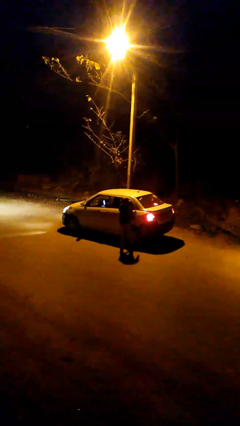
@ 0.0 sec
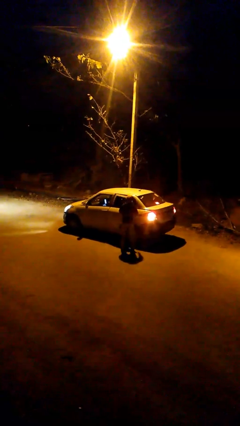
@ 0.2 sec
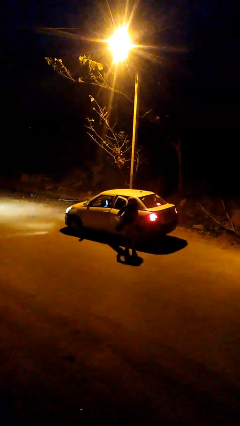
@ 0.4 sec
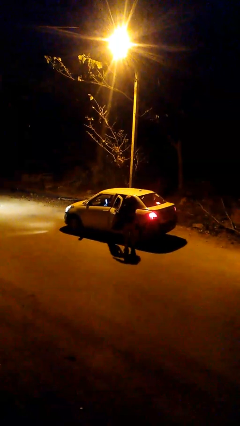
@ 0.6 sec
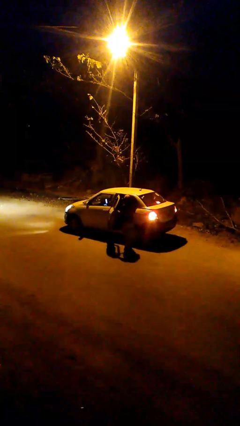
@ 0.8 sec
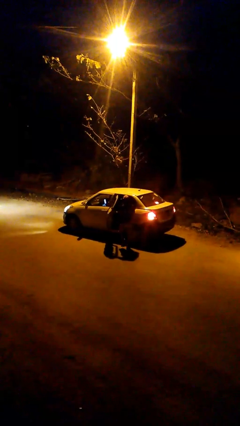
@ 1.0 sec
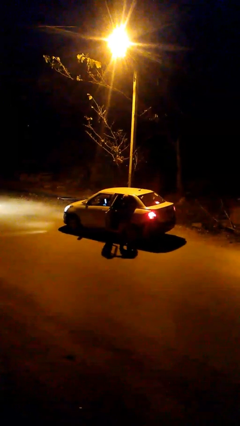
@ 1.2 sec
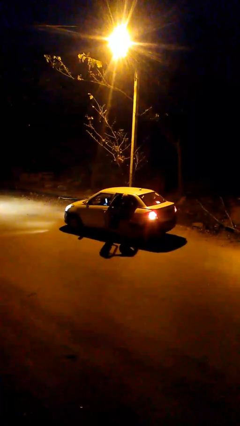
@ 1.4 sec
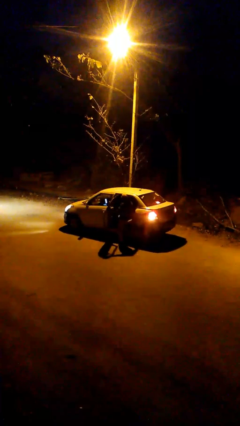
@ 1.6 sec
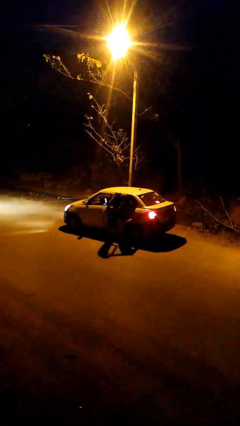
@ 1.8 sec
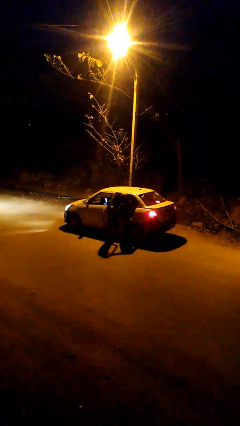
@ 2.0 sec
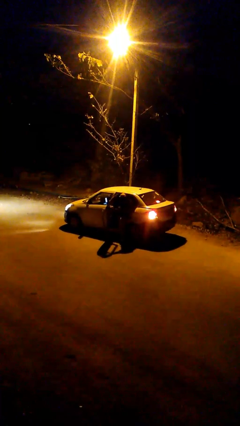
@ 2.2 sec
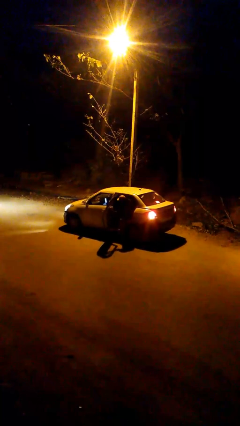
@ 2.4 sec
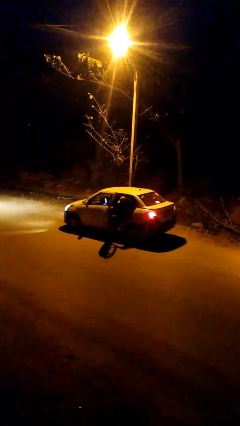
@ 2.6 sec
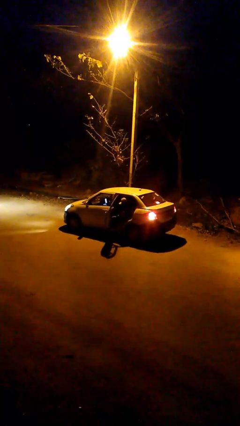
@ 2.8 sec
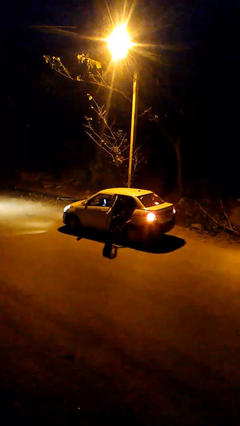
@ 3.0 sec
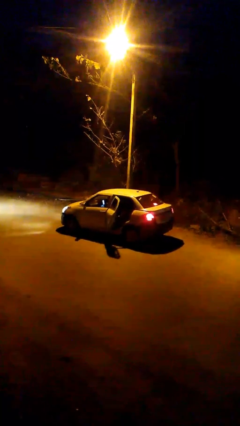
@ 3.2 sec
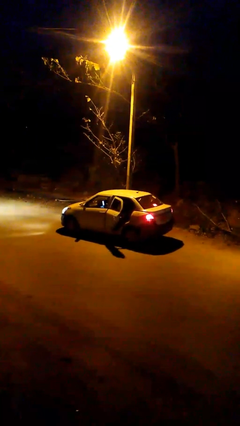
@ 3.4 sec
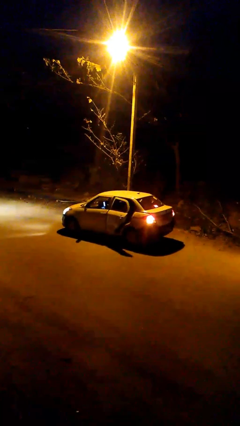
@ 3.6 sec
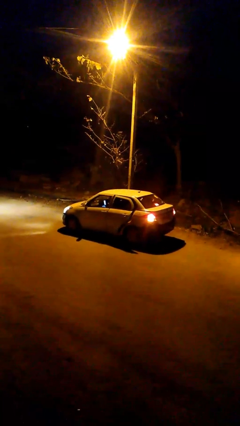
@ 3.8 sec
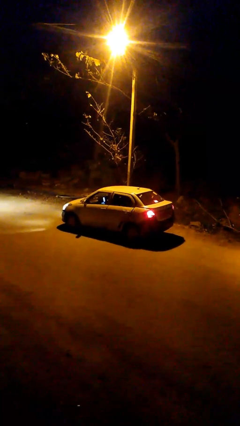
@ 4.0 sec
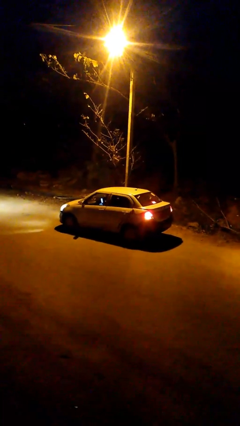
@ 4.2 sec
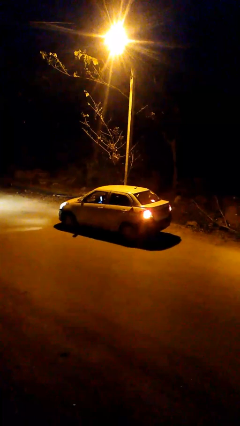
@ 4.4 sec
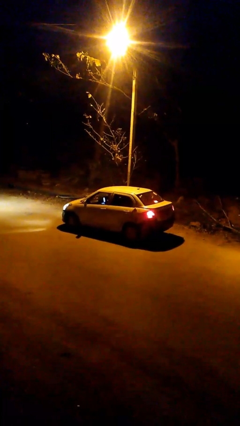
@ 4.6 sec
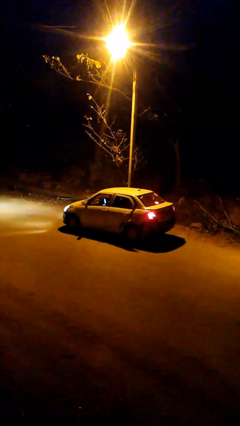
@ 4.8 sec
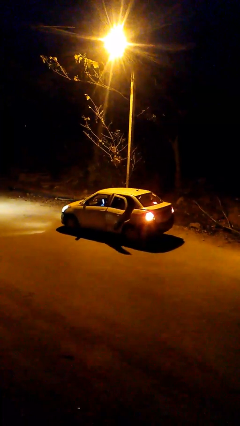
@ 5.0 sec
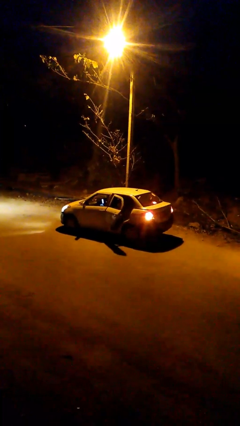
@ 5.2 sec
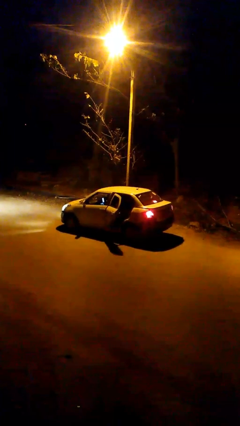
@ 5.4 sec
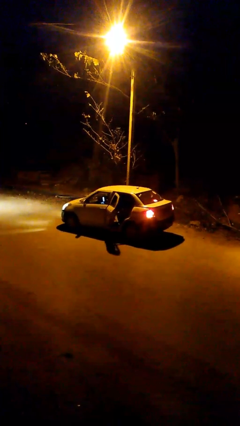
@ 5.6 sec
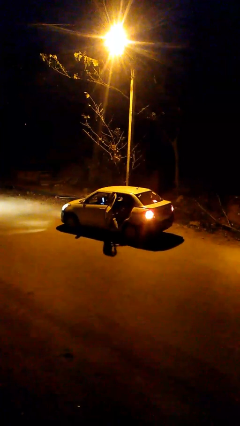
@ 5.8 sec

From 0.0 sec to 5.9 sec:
car picks up person

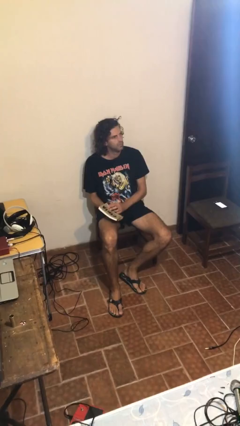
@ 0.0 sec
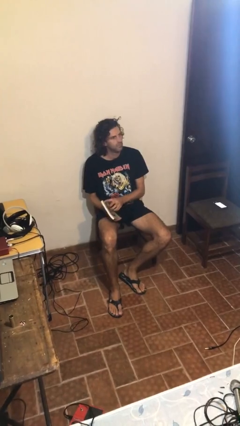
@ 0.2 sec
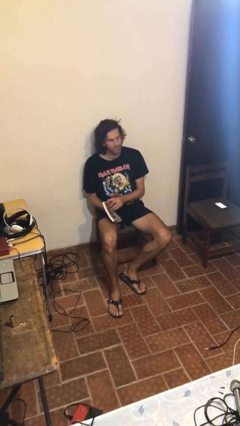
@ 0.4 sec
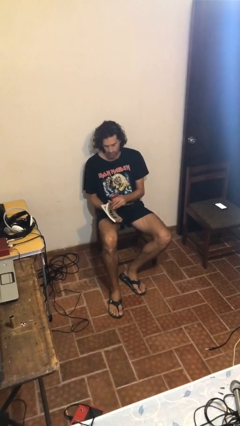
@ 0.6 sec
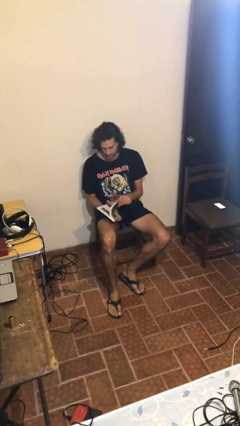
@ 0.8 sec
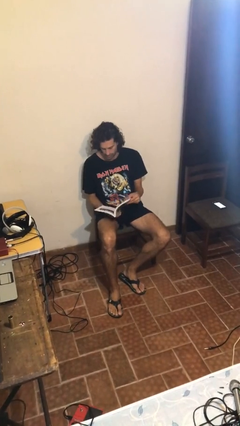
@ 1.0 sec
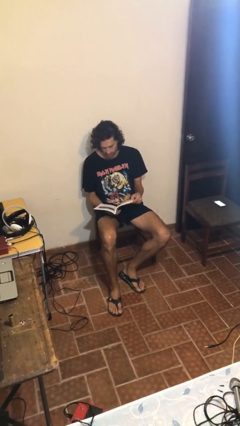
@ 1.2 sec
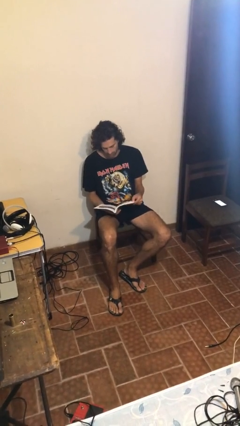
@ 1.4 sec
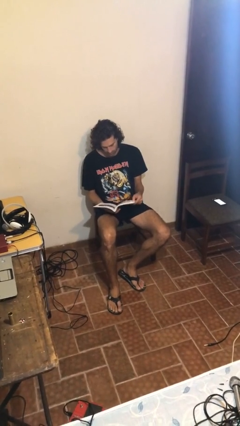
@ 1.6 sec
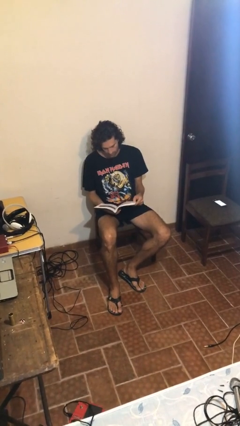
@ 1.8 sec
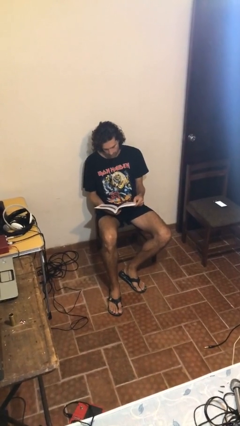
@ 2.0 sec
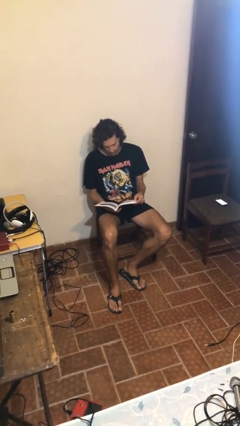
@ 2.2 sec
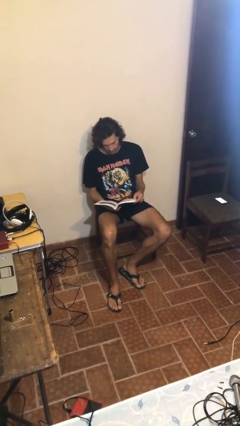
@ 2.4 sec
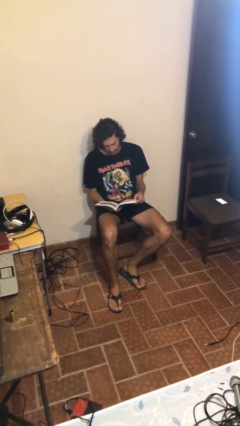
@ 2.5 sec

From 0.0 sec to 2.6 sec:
person reads document

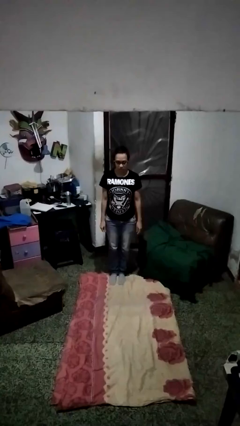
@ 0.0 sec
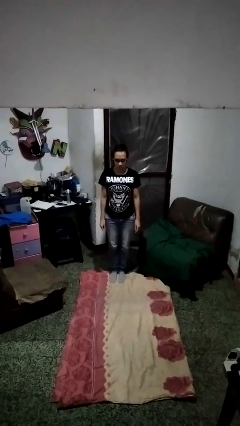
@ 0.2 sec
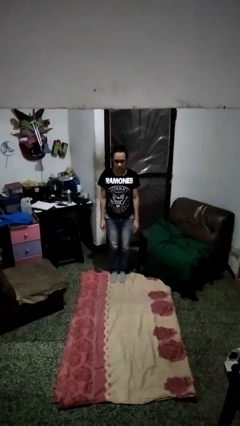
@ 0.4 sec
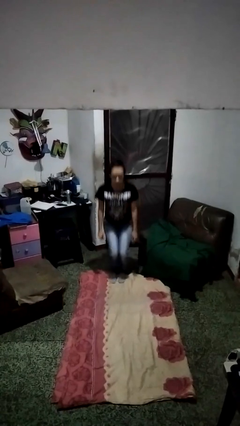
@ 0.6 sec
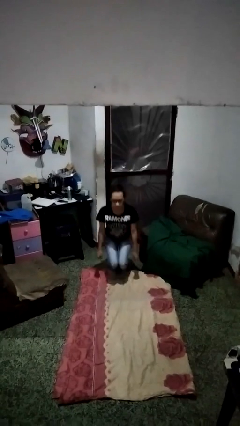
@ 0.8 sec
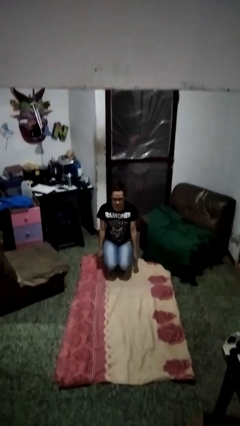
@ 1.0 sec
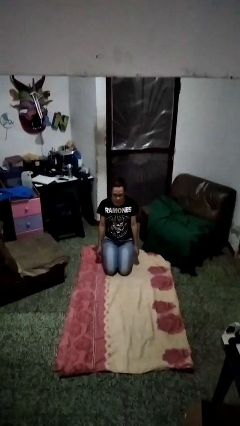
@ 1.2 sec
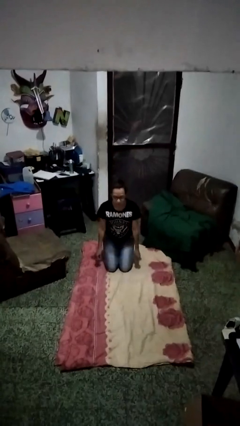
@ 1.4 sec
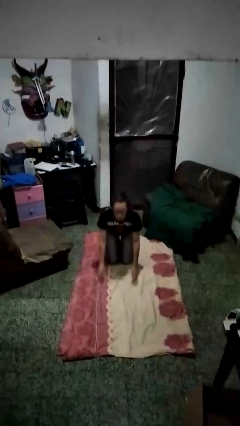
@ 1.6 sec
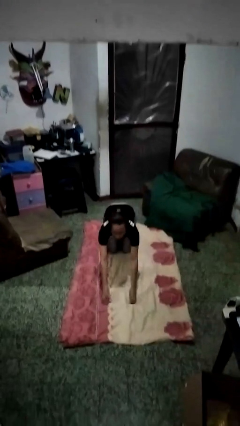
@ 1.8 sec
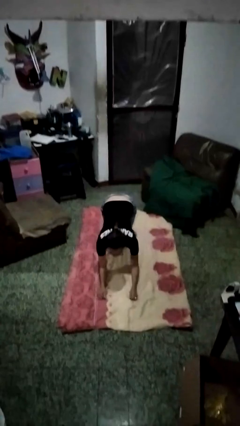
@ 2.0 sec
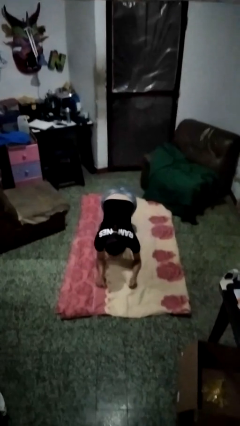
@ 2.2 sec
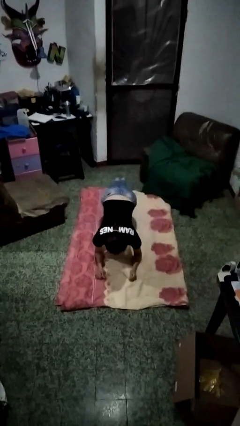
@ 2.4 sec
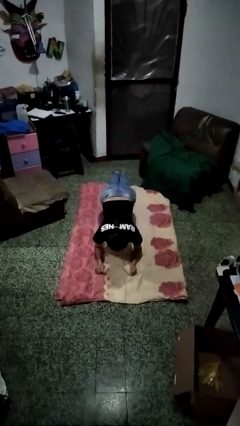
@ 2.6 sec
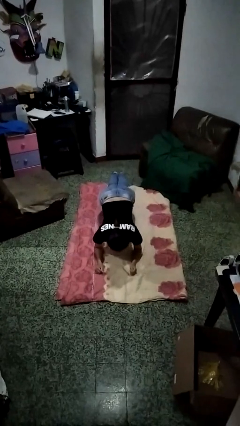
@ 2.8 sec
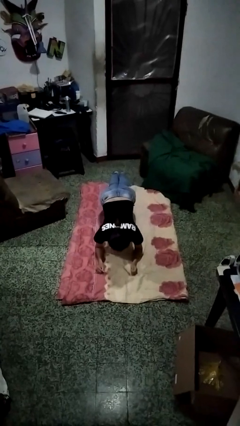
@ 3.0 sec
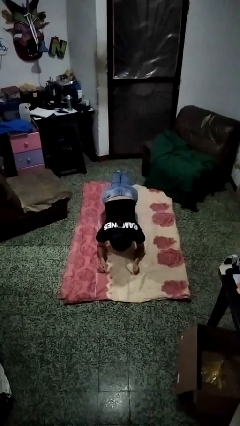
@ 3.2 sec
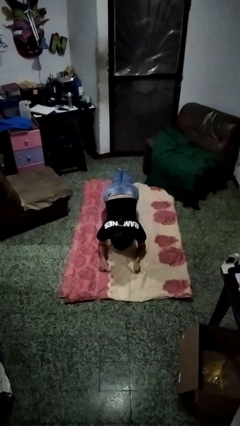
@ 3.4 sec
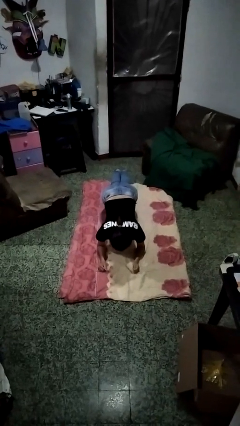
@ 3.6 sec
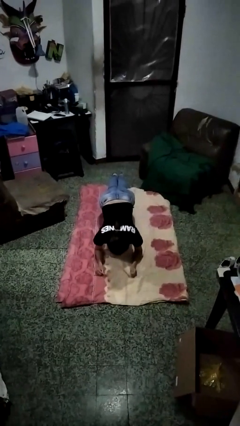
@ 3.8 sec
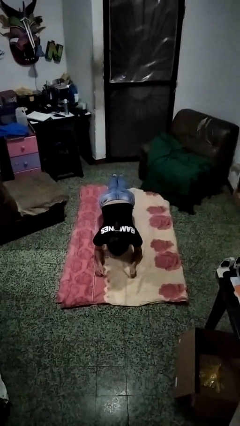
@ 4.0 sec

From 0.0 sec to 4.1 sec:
person exercises with plank

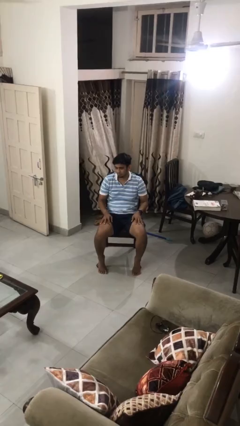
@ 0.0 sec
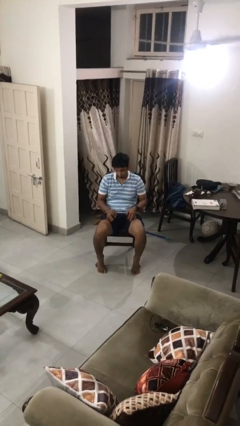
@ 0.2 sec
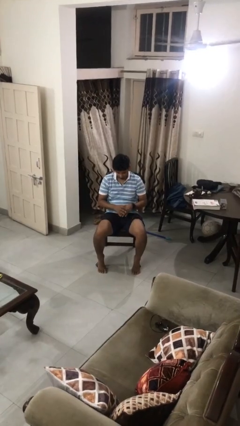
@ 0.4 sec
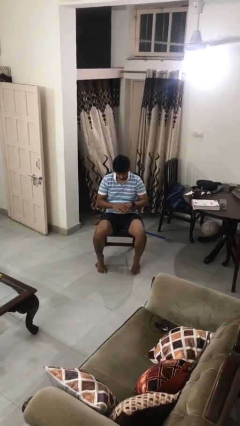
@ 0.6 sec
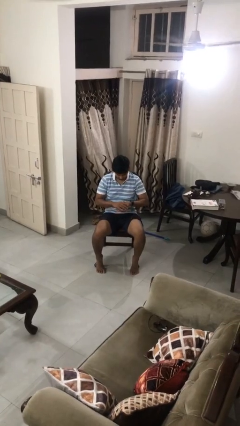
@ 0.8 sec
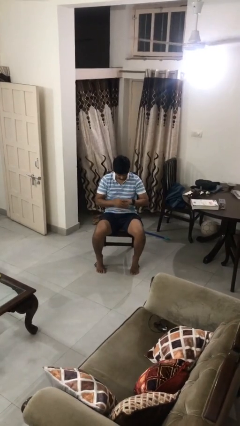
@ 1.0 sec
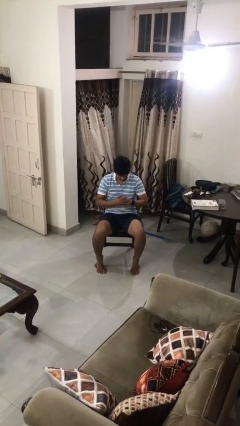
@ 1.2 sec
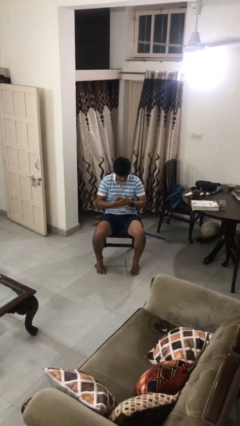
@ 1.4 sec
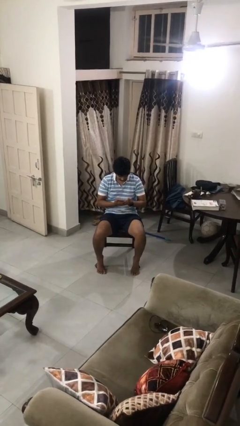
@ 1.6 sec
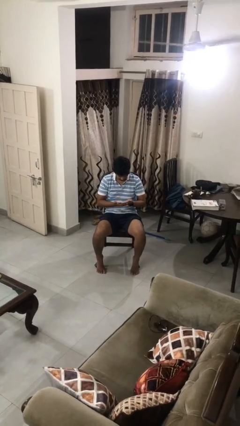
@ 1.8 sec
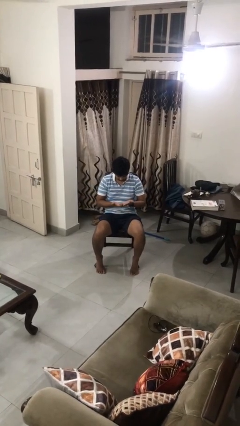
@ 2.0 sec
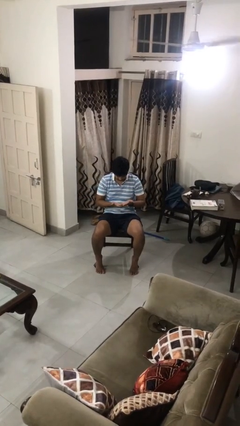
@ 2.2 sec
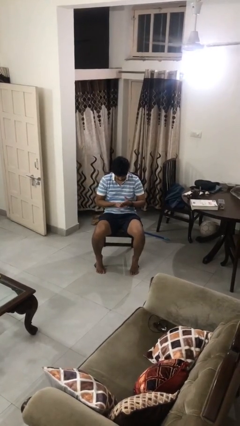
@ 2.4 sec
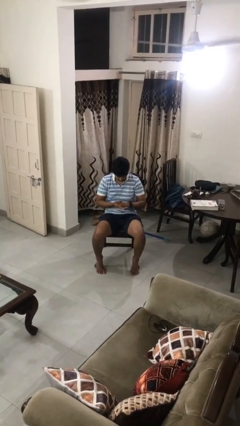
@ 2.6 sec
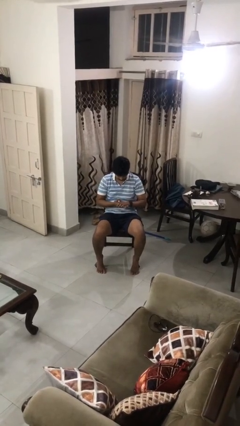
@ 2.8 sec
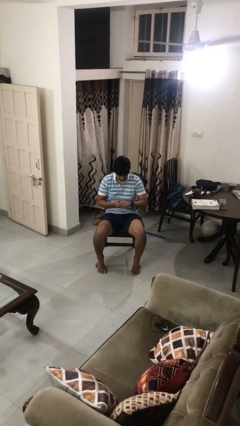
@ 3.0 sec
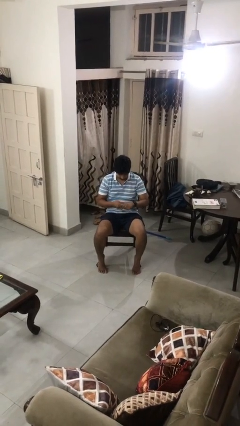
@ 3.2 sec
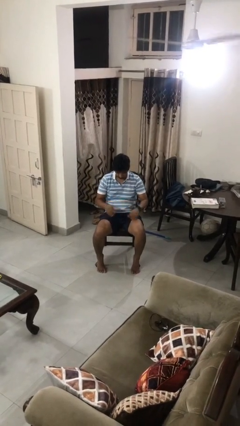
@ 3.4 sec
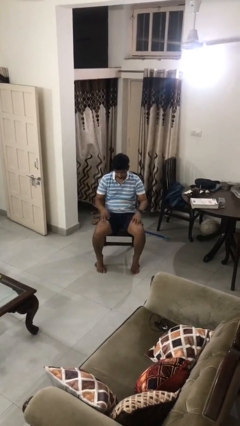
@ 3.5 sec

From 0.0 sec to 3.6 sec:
person looks at hands in lap

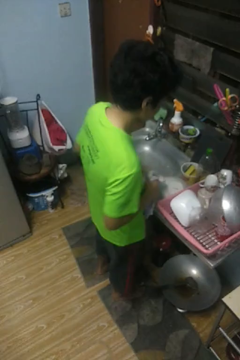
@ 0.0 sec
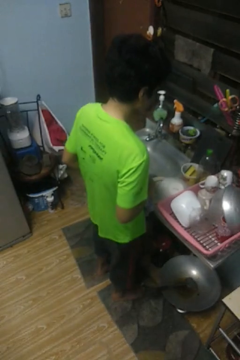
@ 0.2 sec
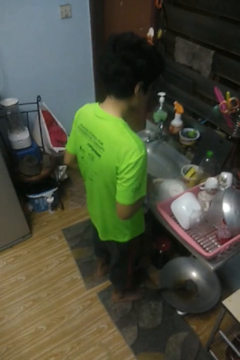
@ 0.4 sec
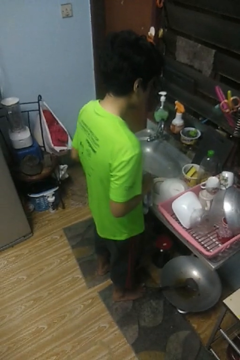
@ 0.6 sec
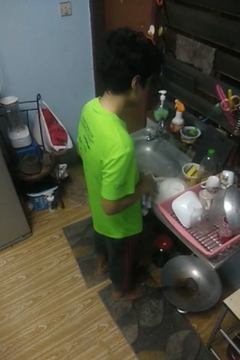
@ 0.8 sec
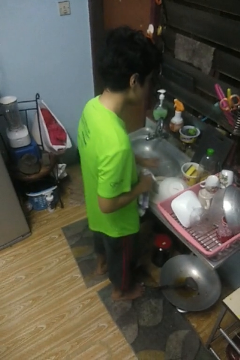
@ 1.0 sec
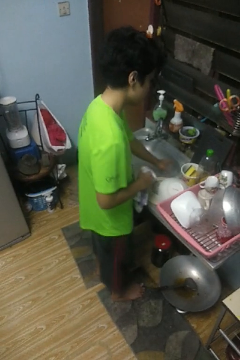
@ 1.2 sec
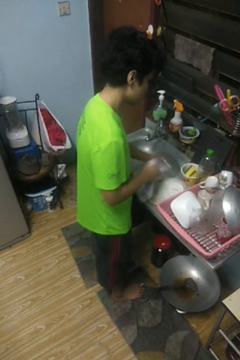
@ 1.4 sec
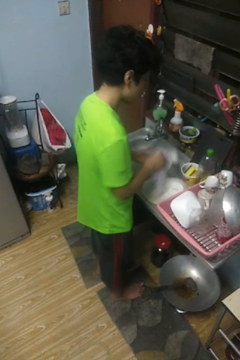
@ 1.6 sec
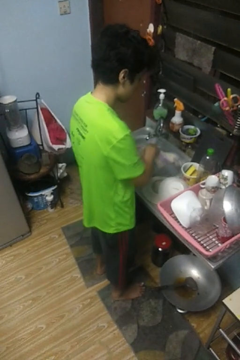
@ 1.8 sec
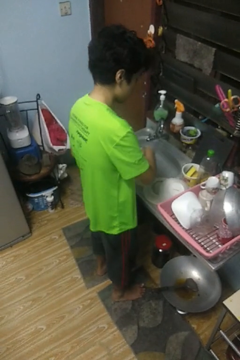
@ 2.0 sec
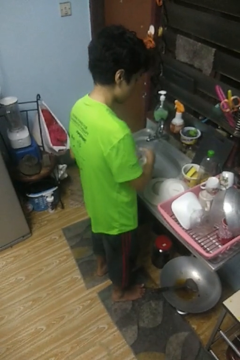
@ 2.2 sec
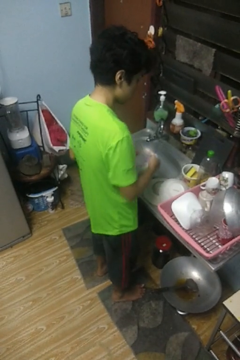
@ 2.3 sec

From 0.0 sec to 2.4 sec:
person dries dish
